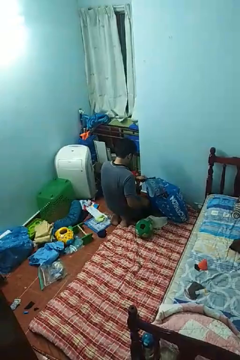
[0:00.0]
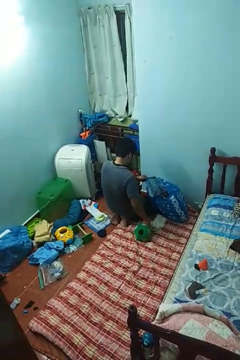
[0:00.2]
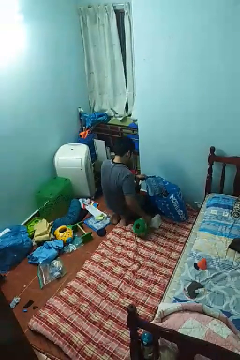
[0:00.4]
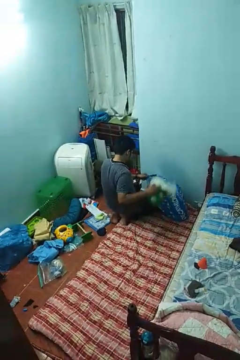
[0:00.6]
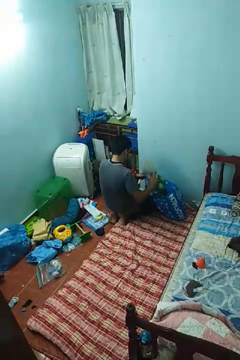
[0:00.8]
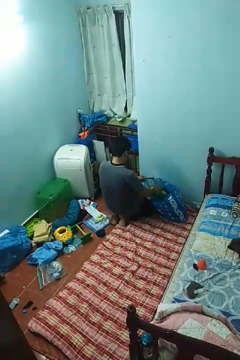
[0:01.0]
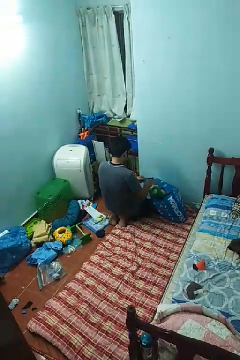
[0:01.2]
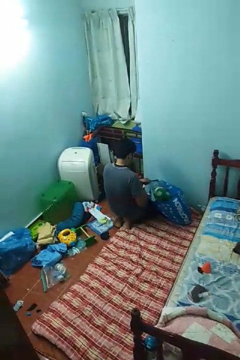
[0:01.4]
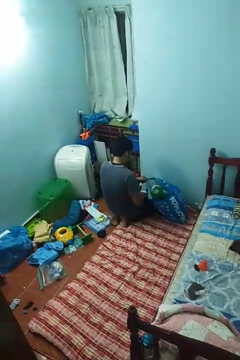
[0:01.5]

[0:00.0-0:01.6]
person puts object into bag

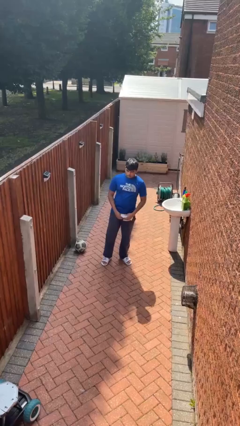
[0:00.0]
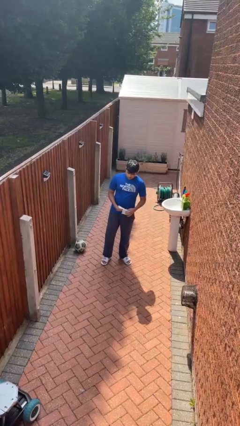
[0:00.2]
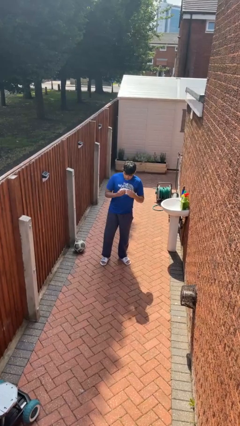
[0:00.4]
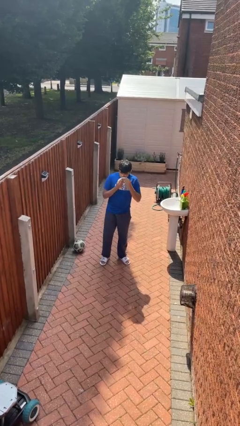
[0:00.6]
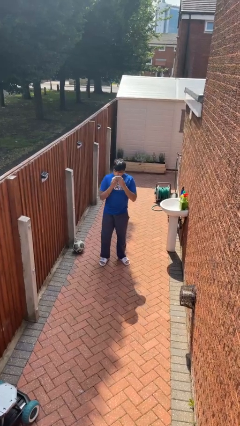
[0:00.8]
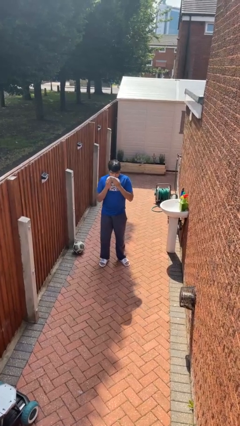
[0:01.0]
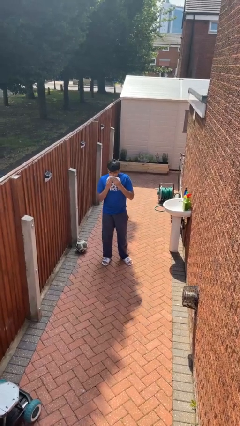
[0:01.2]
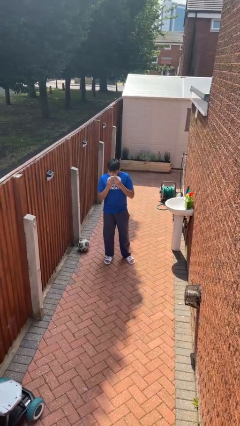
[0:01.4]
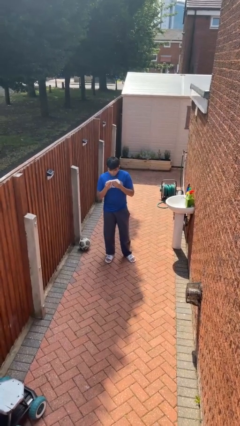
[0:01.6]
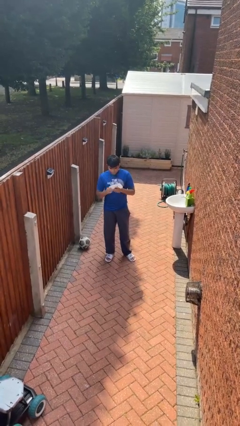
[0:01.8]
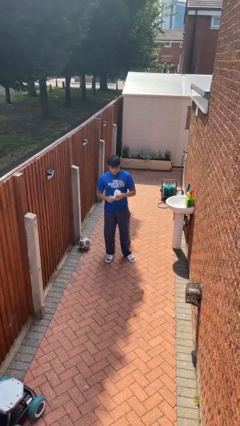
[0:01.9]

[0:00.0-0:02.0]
person wipes mouth with napkin

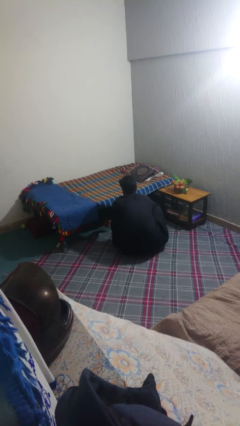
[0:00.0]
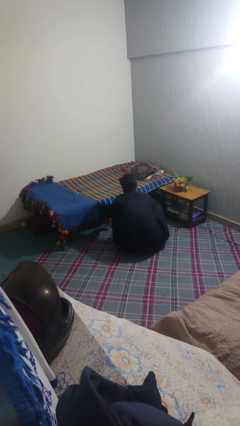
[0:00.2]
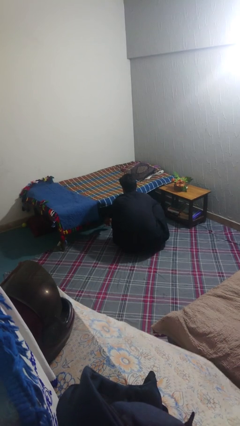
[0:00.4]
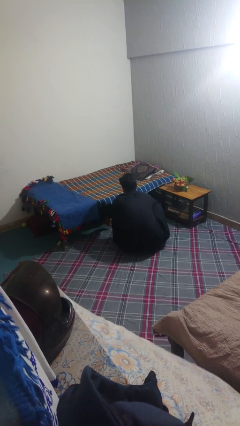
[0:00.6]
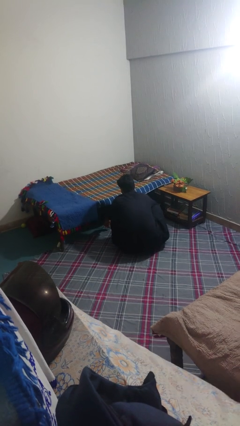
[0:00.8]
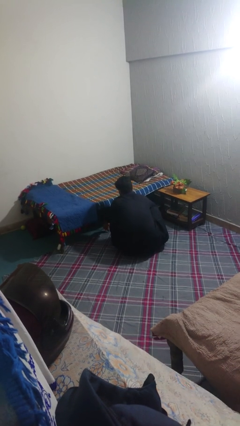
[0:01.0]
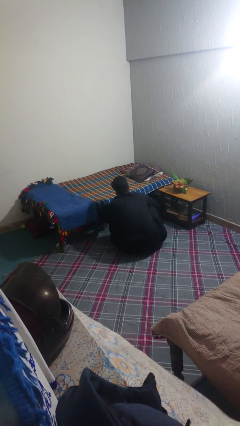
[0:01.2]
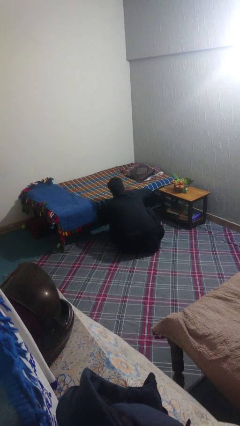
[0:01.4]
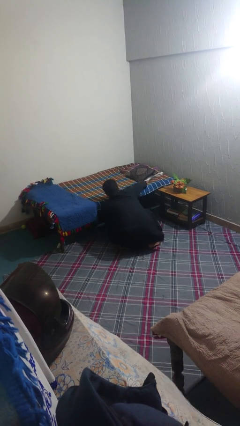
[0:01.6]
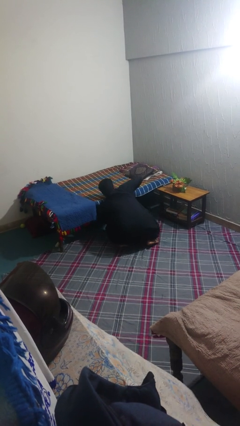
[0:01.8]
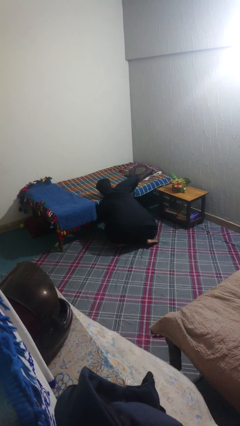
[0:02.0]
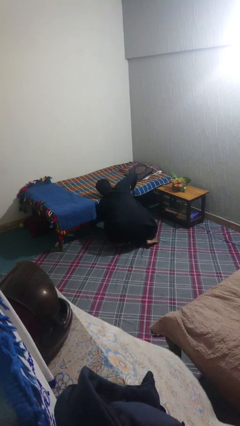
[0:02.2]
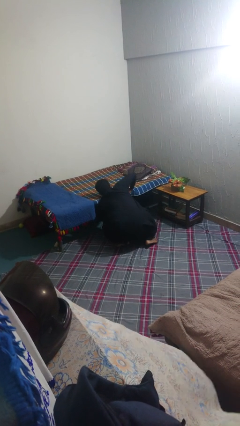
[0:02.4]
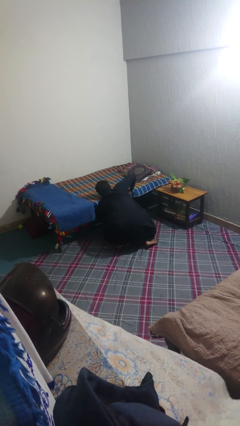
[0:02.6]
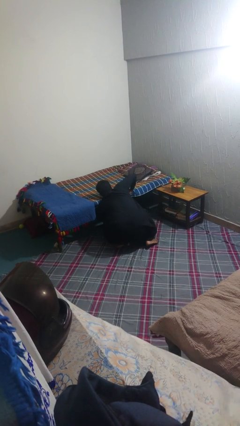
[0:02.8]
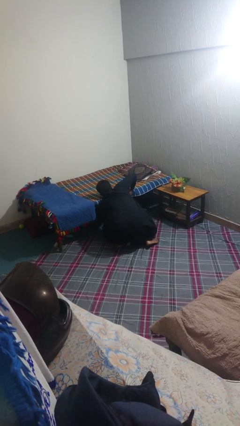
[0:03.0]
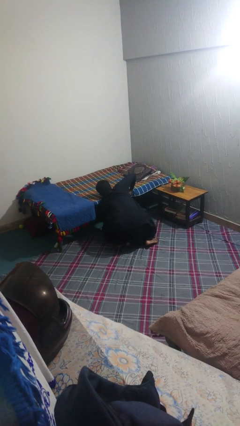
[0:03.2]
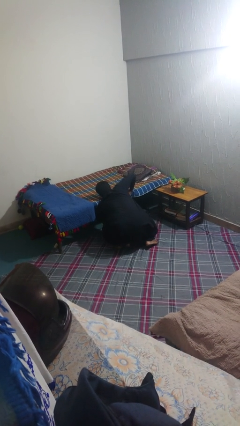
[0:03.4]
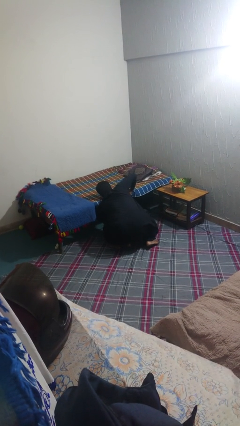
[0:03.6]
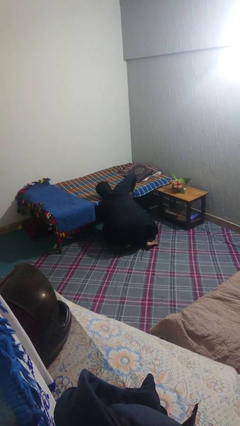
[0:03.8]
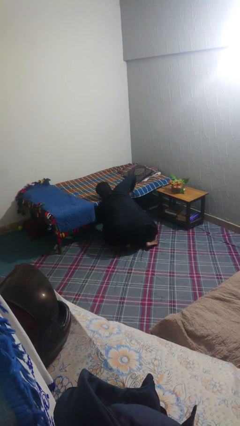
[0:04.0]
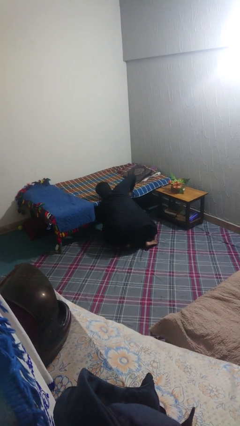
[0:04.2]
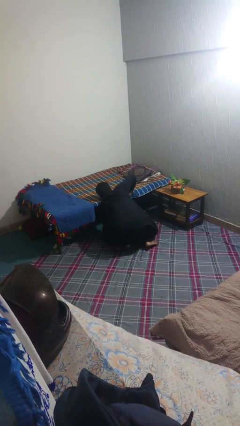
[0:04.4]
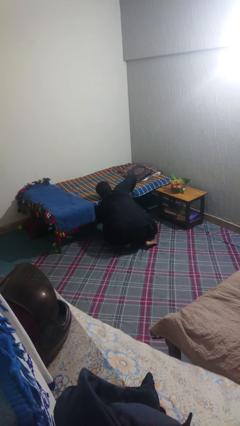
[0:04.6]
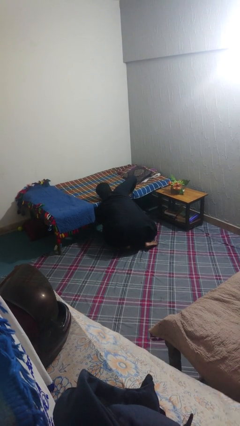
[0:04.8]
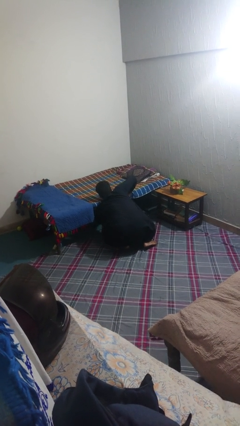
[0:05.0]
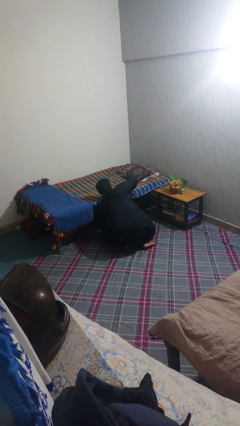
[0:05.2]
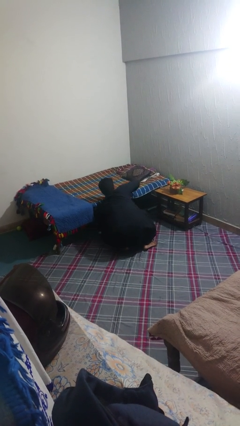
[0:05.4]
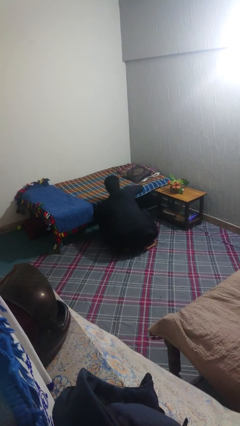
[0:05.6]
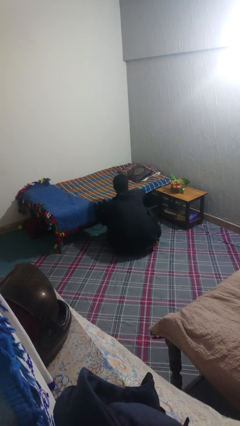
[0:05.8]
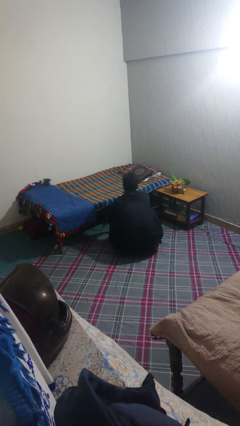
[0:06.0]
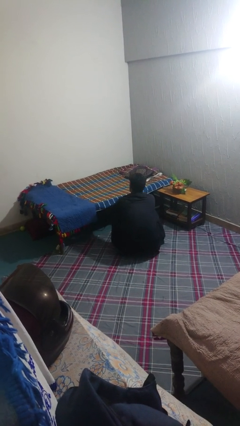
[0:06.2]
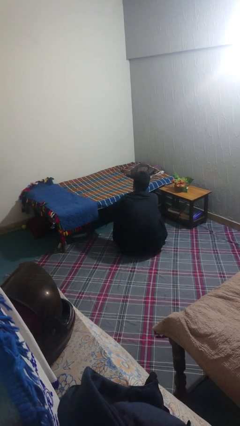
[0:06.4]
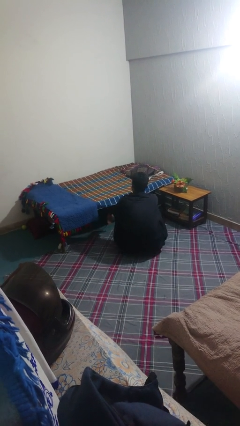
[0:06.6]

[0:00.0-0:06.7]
person searches under bed

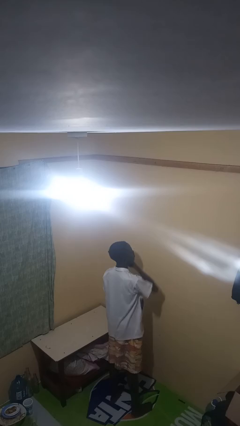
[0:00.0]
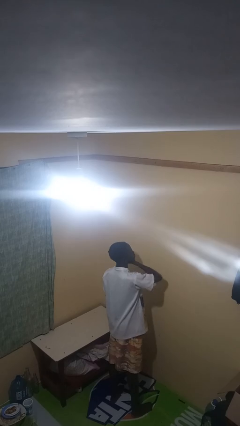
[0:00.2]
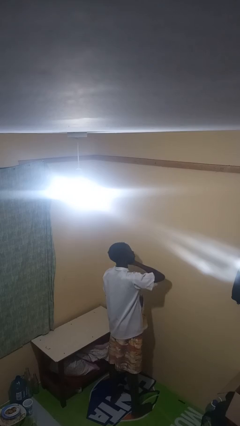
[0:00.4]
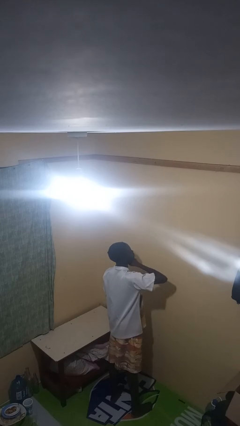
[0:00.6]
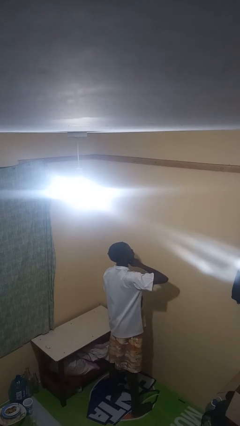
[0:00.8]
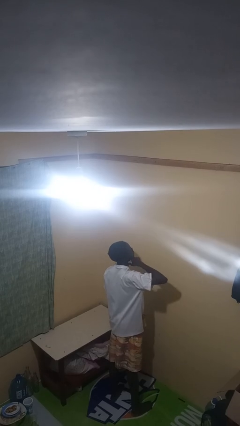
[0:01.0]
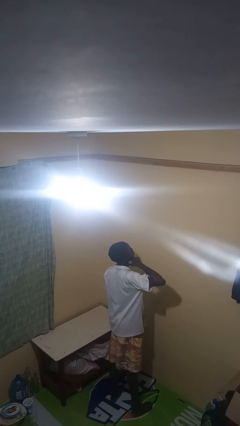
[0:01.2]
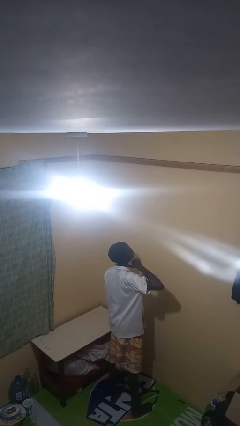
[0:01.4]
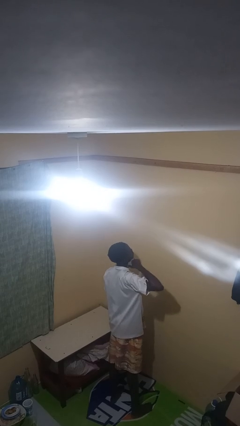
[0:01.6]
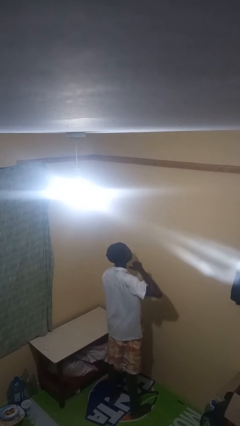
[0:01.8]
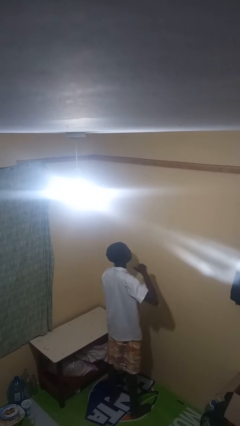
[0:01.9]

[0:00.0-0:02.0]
person gestures cut

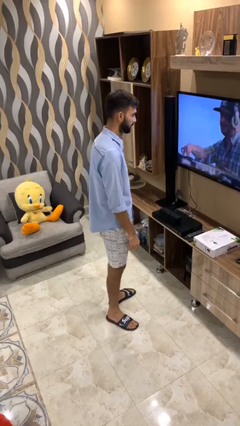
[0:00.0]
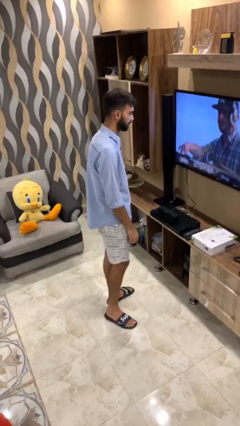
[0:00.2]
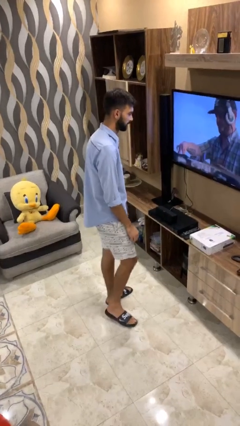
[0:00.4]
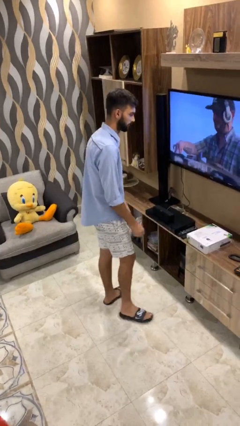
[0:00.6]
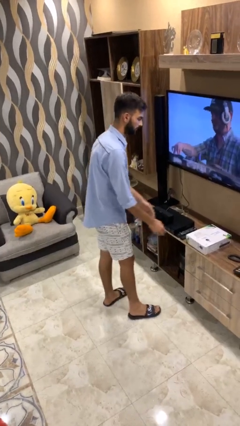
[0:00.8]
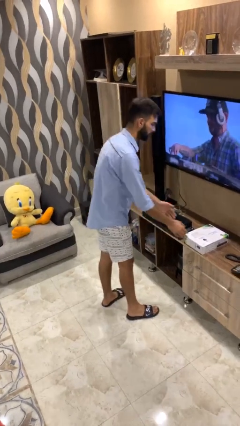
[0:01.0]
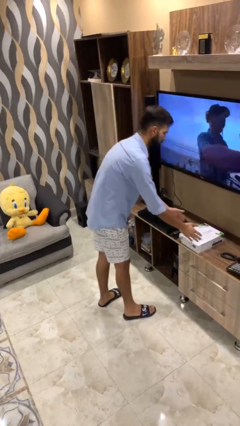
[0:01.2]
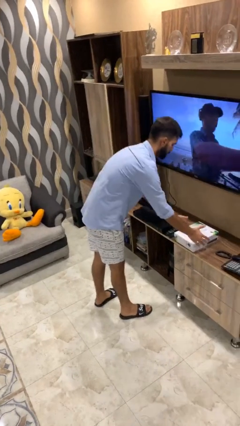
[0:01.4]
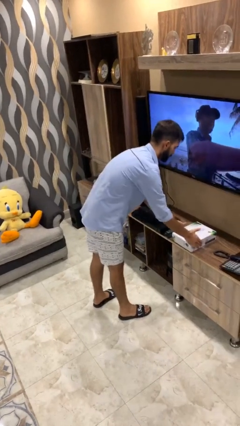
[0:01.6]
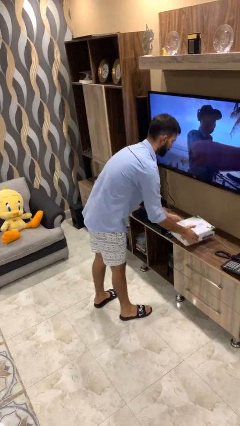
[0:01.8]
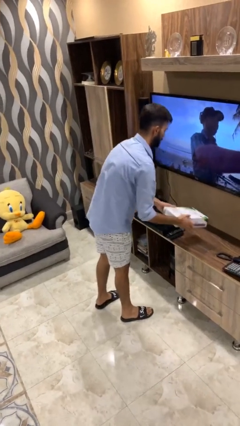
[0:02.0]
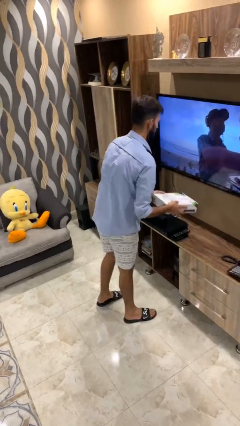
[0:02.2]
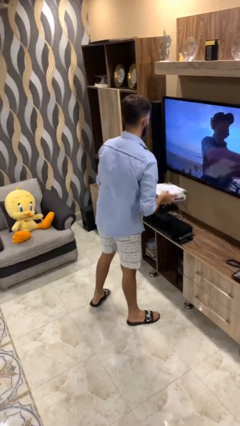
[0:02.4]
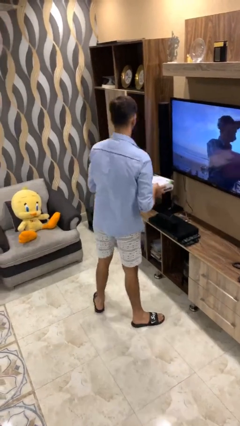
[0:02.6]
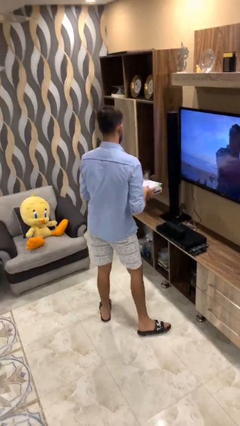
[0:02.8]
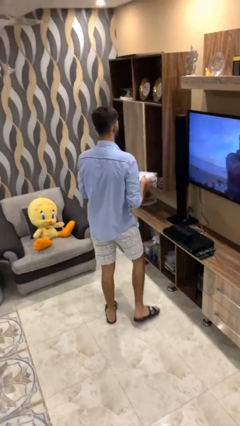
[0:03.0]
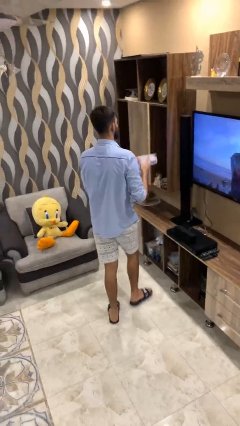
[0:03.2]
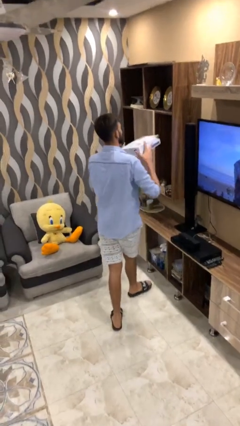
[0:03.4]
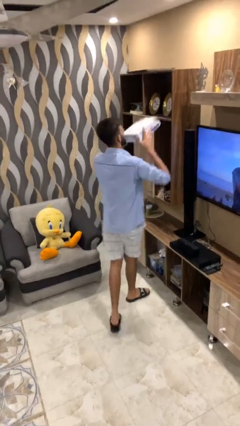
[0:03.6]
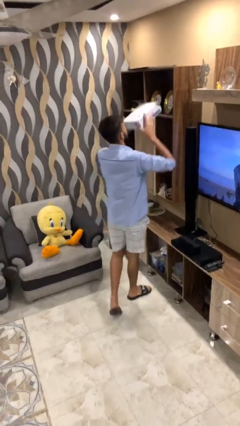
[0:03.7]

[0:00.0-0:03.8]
person picks up object from table

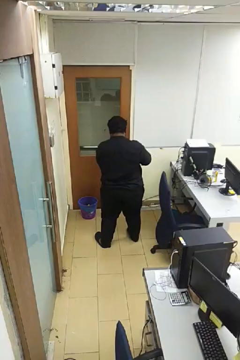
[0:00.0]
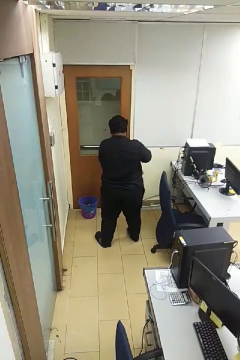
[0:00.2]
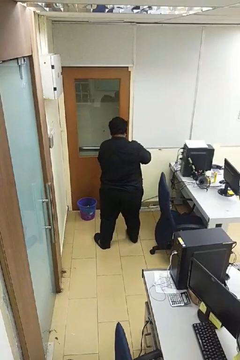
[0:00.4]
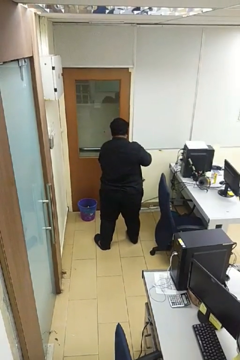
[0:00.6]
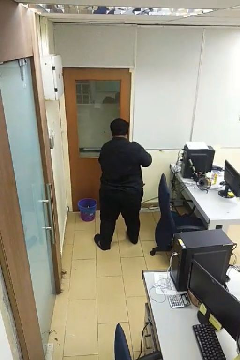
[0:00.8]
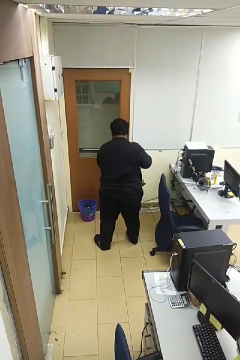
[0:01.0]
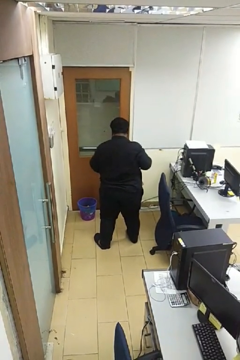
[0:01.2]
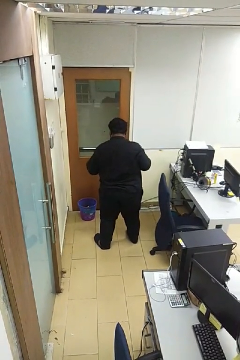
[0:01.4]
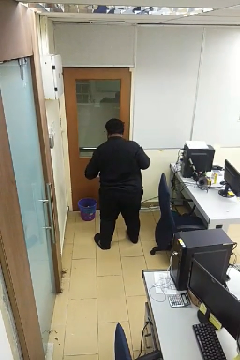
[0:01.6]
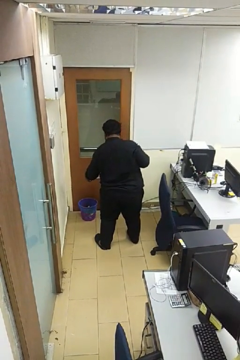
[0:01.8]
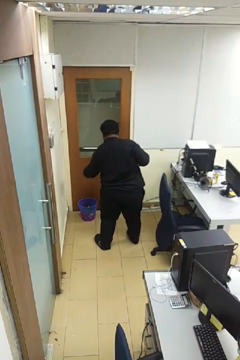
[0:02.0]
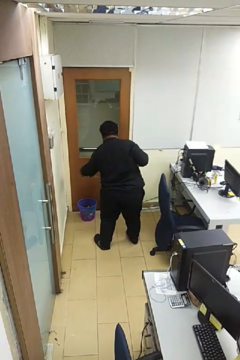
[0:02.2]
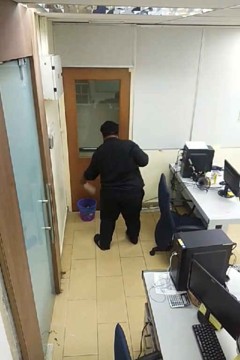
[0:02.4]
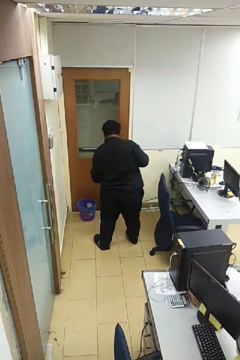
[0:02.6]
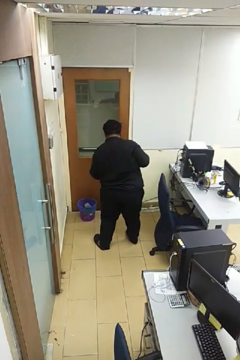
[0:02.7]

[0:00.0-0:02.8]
person discards trash
